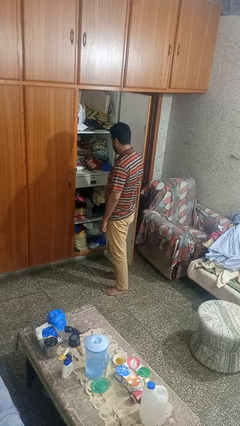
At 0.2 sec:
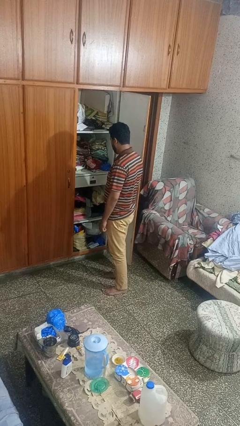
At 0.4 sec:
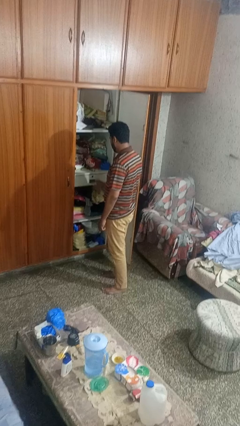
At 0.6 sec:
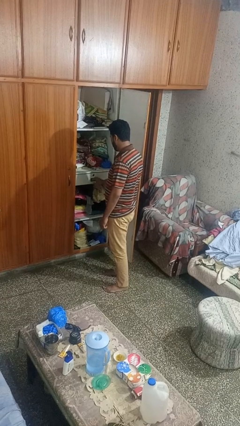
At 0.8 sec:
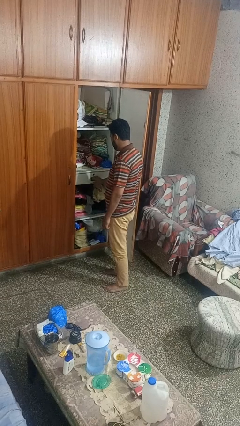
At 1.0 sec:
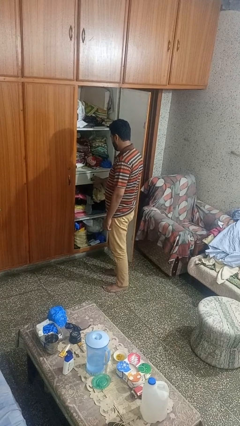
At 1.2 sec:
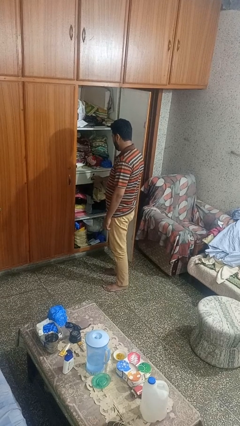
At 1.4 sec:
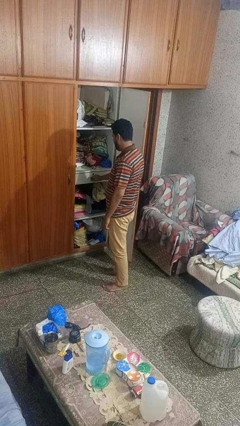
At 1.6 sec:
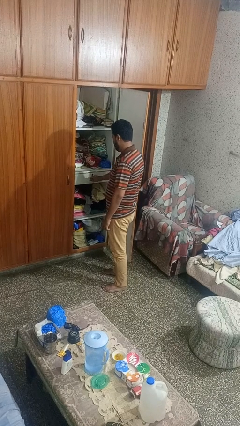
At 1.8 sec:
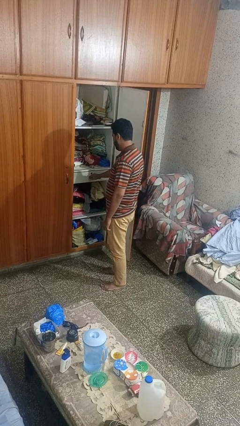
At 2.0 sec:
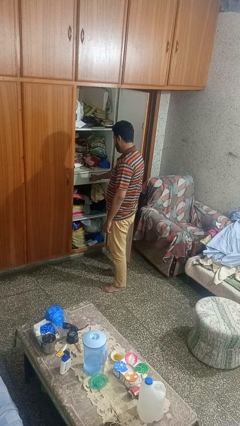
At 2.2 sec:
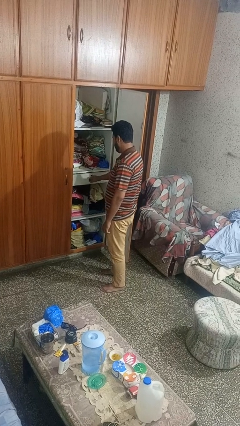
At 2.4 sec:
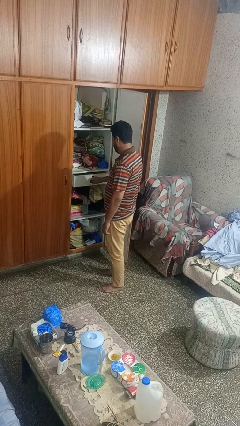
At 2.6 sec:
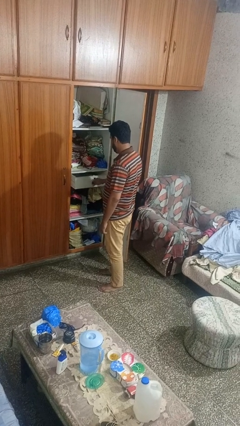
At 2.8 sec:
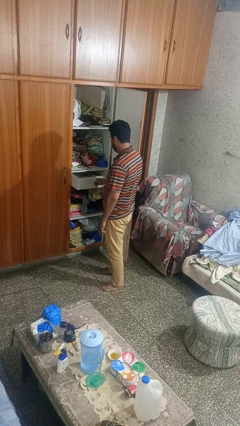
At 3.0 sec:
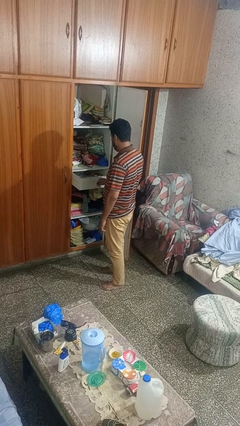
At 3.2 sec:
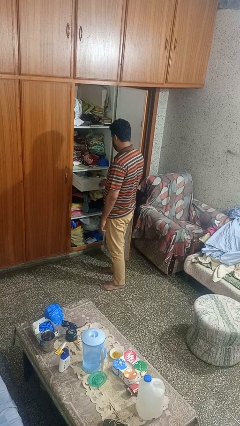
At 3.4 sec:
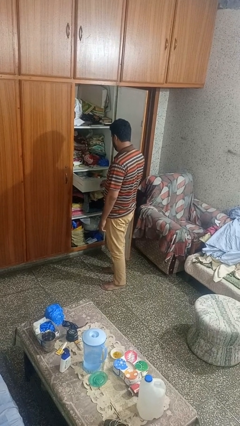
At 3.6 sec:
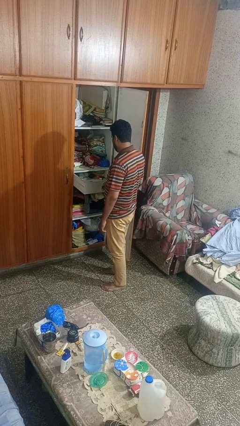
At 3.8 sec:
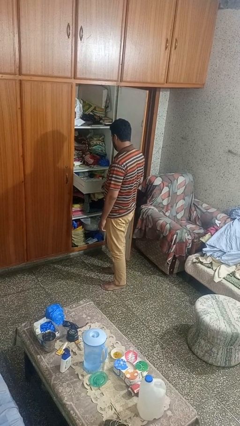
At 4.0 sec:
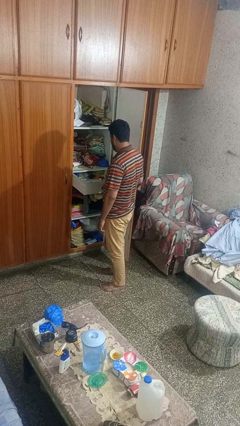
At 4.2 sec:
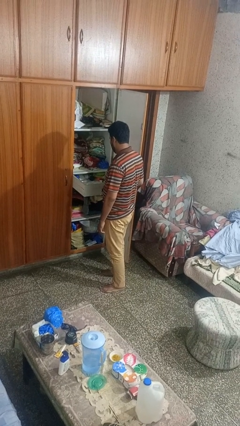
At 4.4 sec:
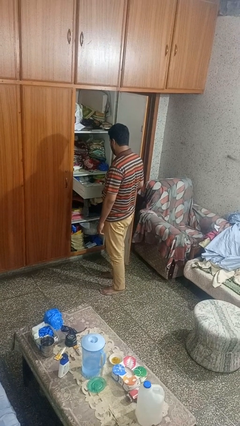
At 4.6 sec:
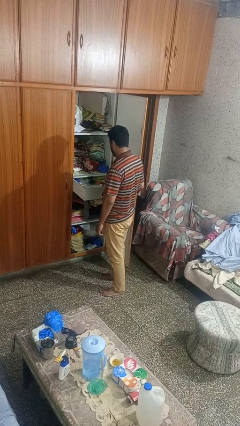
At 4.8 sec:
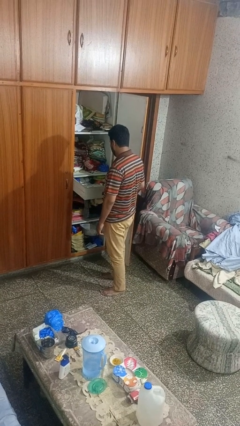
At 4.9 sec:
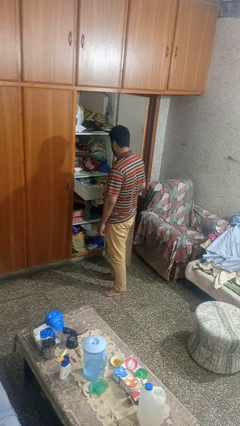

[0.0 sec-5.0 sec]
person opens dresser drawer

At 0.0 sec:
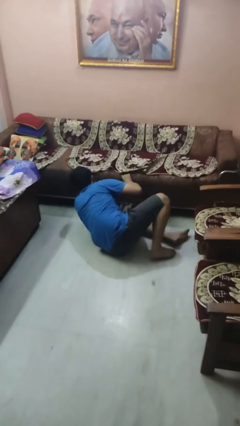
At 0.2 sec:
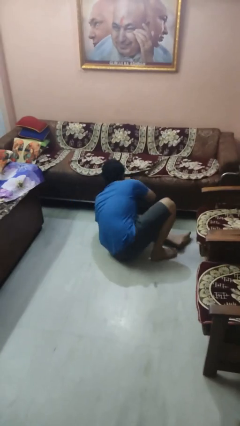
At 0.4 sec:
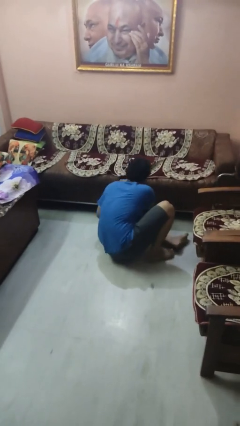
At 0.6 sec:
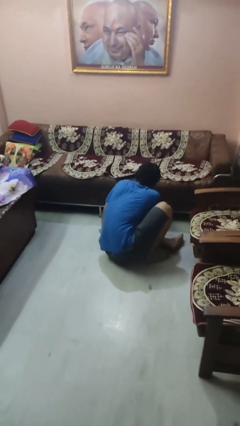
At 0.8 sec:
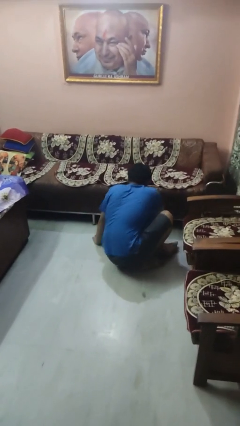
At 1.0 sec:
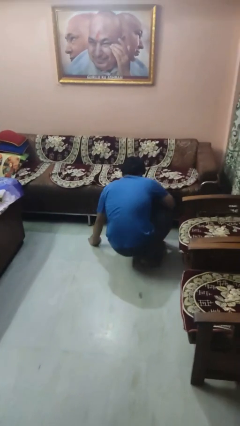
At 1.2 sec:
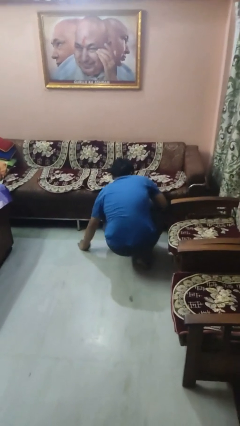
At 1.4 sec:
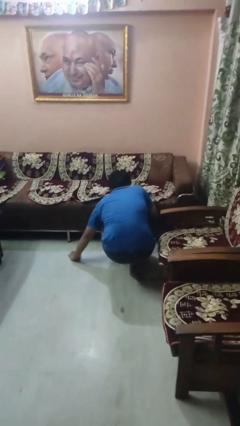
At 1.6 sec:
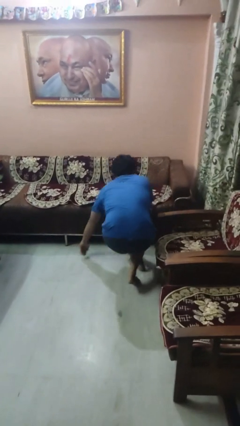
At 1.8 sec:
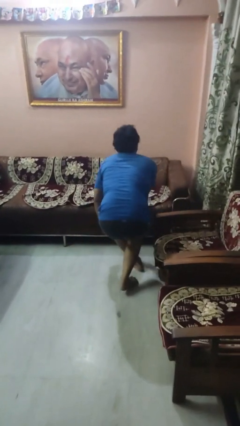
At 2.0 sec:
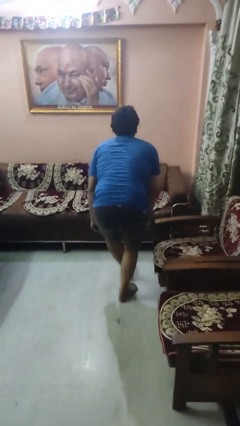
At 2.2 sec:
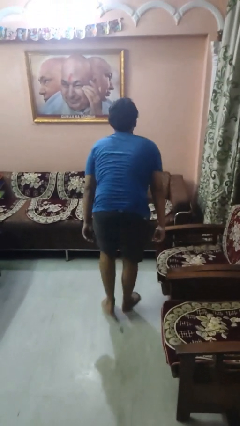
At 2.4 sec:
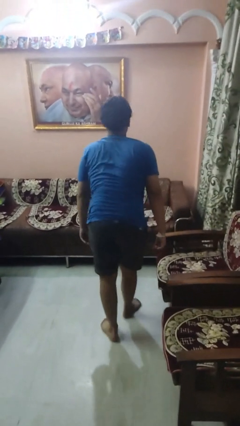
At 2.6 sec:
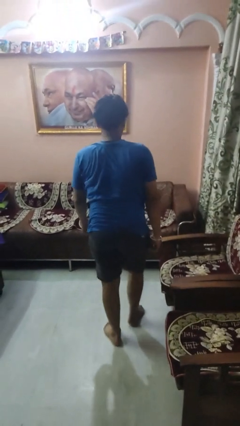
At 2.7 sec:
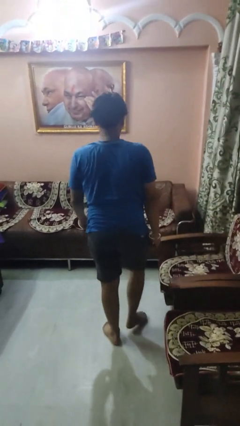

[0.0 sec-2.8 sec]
person stands up from floor

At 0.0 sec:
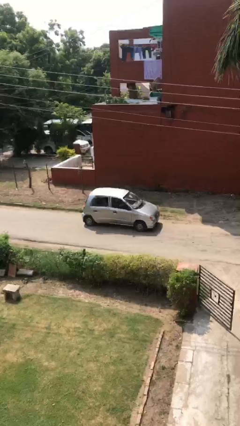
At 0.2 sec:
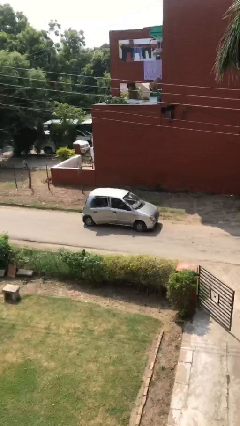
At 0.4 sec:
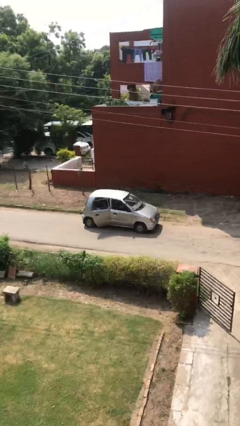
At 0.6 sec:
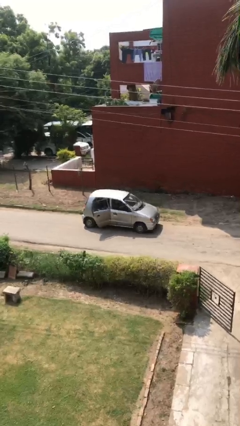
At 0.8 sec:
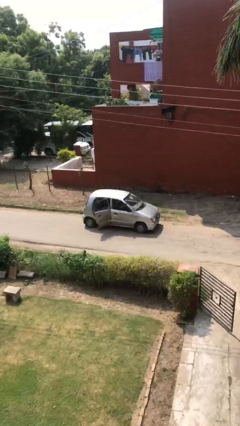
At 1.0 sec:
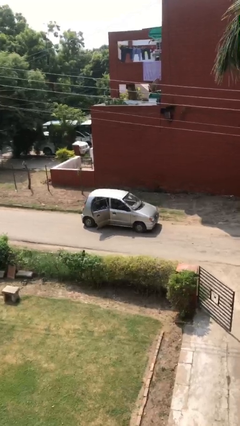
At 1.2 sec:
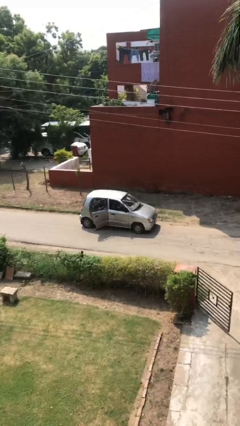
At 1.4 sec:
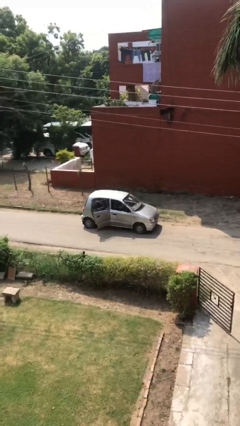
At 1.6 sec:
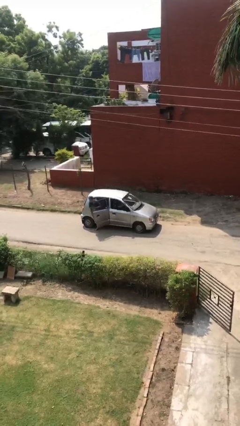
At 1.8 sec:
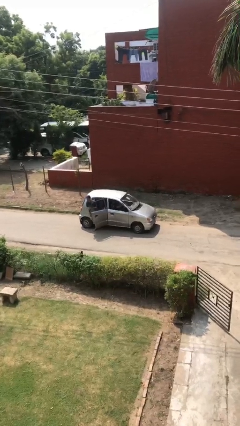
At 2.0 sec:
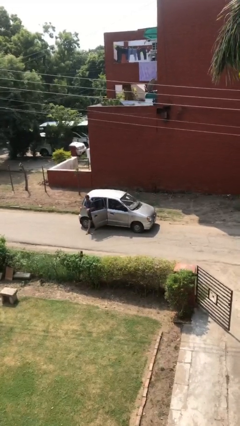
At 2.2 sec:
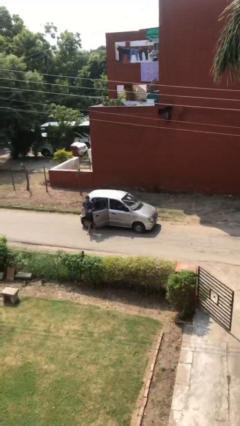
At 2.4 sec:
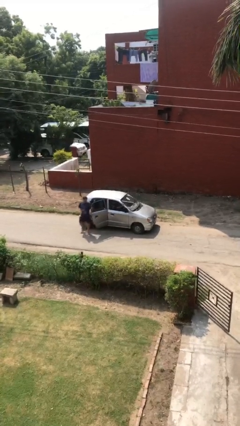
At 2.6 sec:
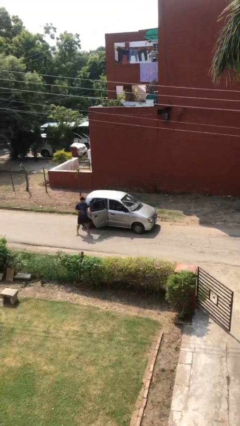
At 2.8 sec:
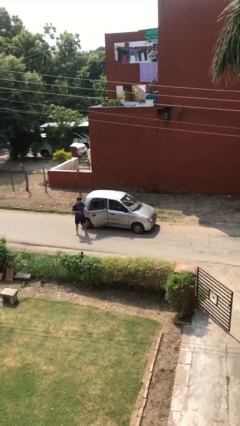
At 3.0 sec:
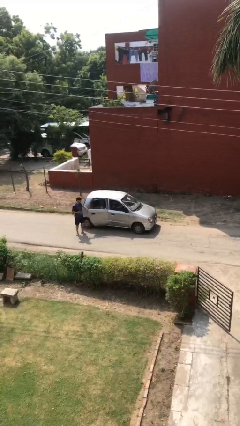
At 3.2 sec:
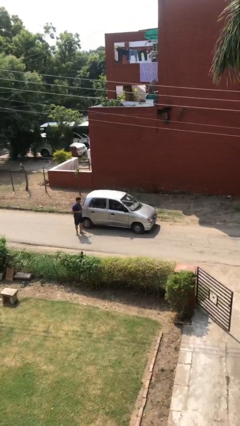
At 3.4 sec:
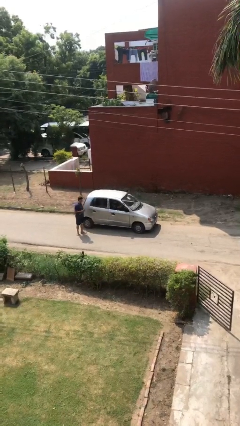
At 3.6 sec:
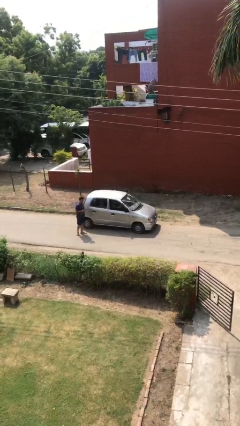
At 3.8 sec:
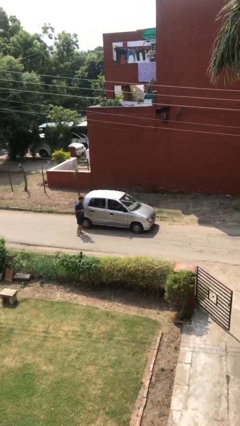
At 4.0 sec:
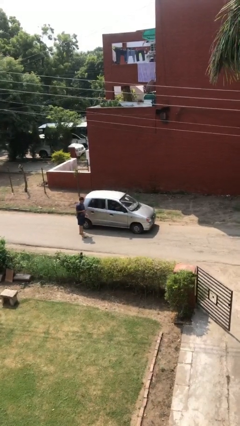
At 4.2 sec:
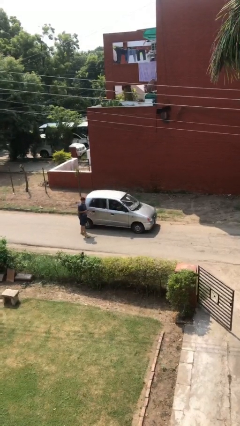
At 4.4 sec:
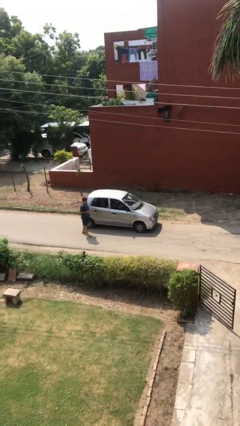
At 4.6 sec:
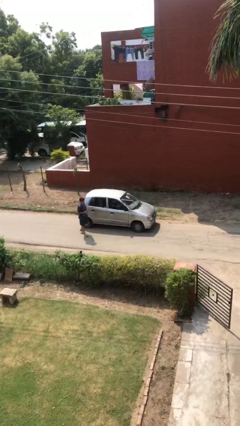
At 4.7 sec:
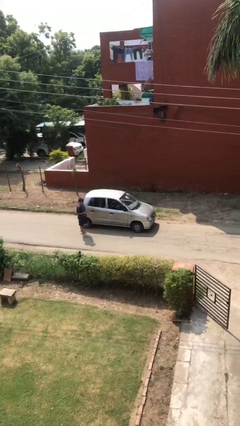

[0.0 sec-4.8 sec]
car drops off person

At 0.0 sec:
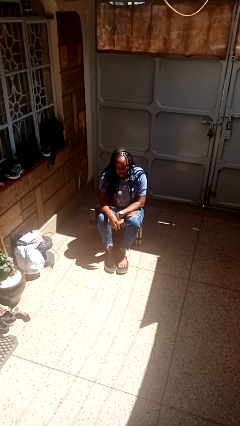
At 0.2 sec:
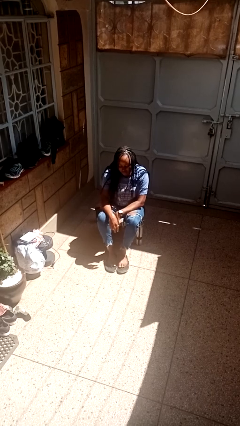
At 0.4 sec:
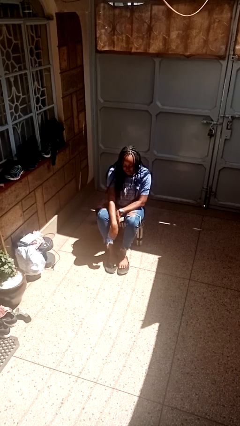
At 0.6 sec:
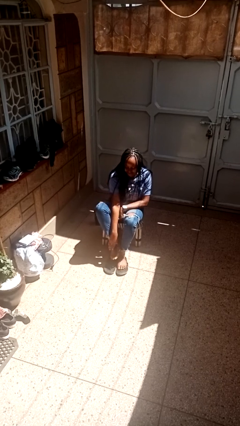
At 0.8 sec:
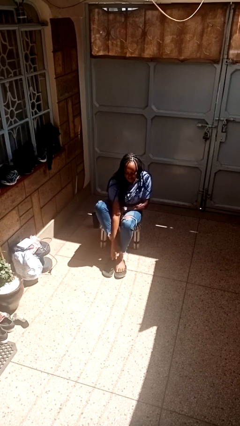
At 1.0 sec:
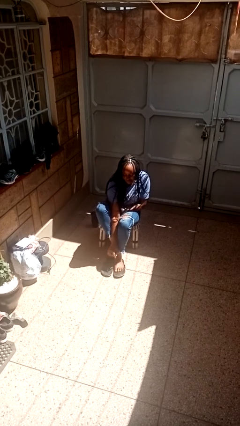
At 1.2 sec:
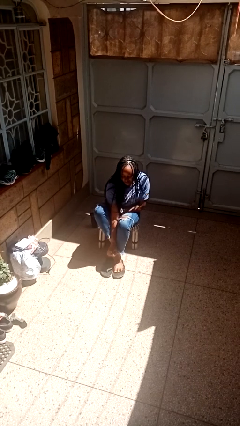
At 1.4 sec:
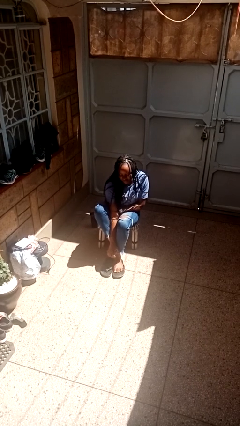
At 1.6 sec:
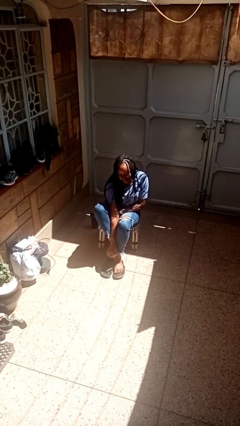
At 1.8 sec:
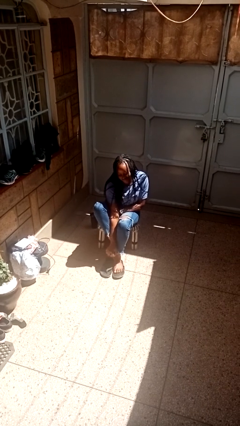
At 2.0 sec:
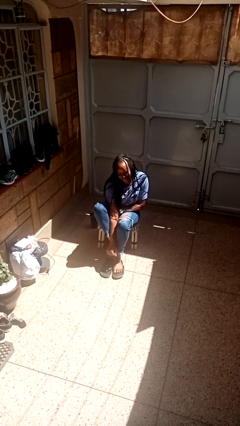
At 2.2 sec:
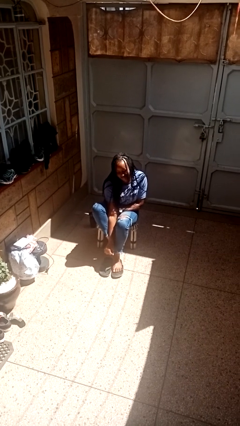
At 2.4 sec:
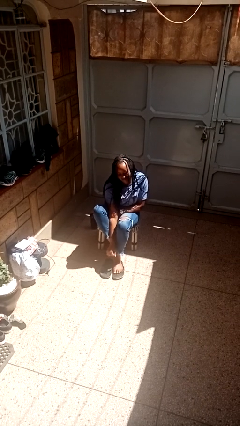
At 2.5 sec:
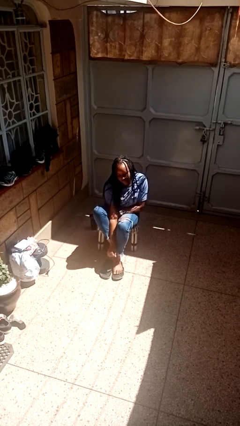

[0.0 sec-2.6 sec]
person rubs foot

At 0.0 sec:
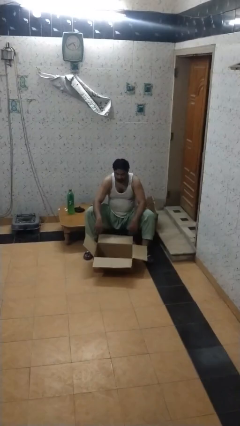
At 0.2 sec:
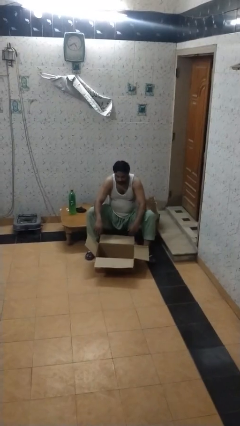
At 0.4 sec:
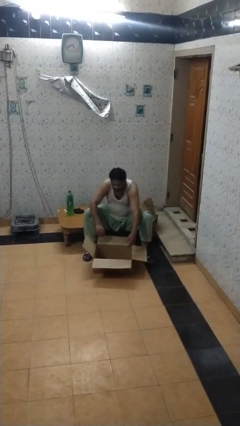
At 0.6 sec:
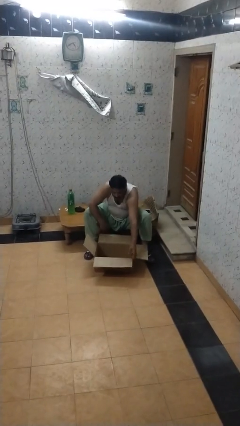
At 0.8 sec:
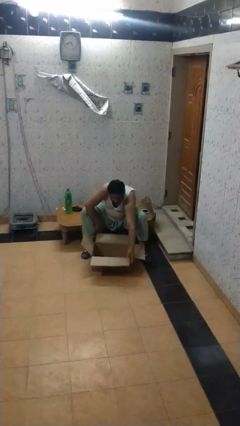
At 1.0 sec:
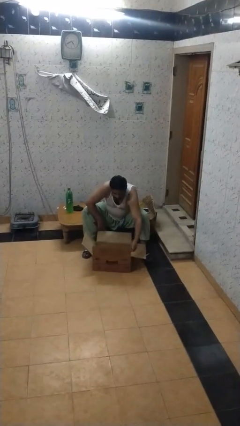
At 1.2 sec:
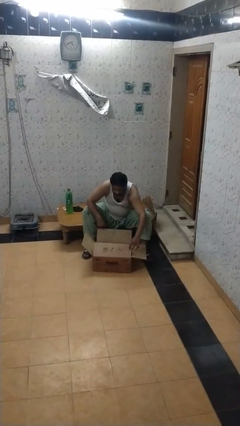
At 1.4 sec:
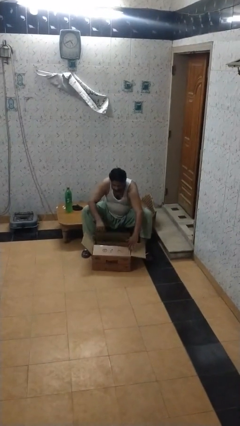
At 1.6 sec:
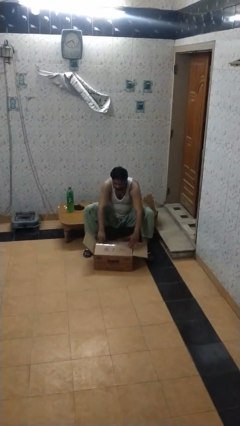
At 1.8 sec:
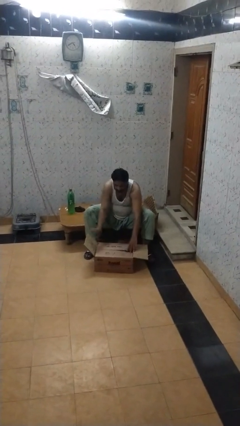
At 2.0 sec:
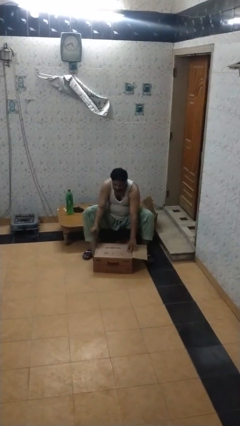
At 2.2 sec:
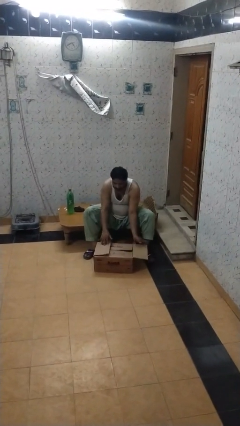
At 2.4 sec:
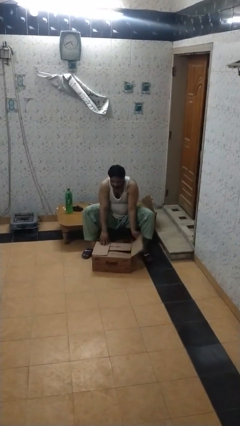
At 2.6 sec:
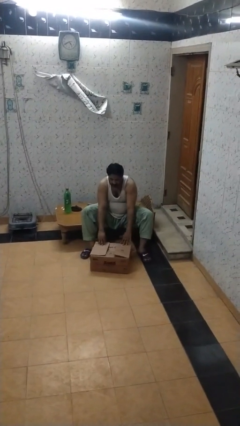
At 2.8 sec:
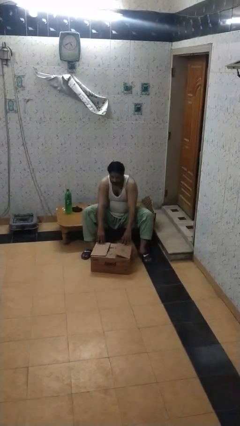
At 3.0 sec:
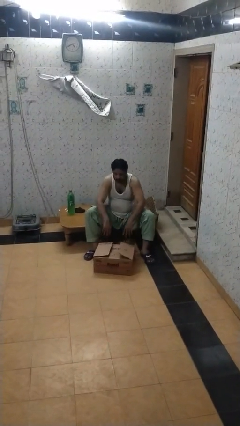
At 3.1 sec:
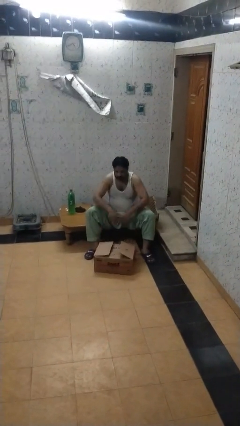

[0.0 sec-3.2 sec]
person closes box
